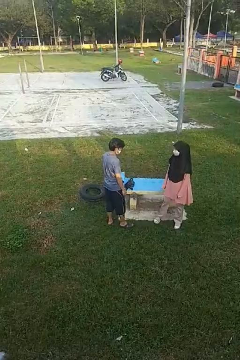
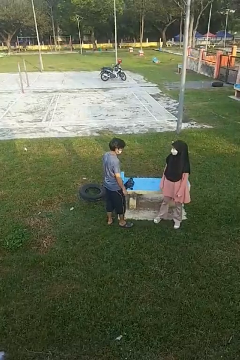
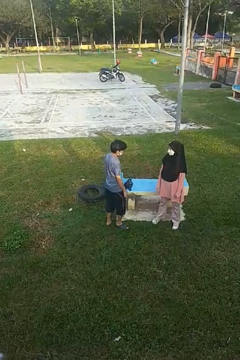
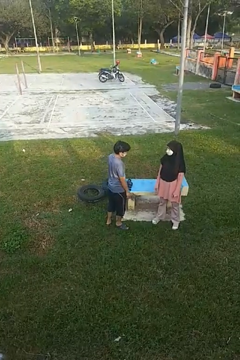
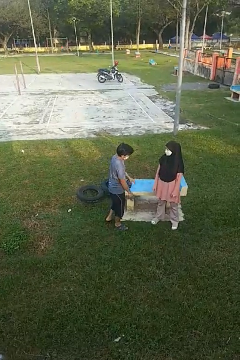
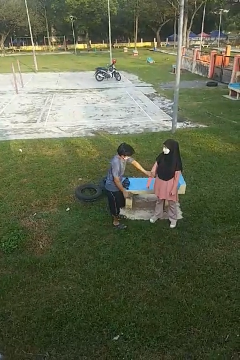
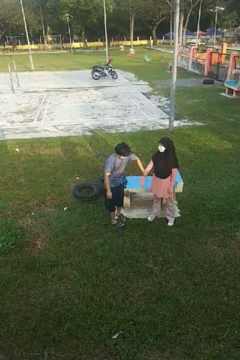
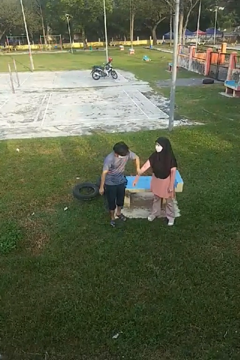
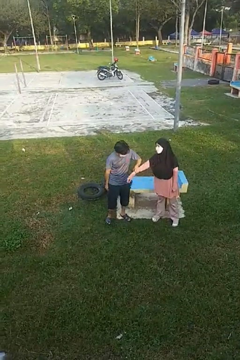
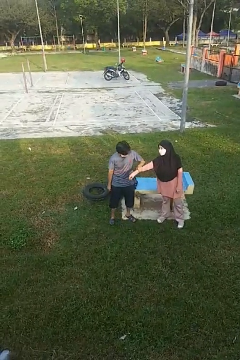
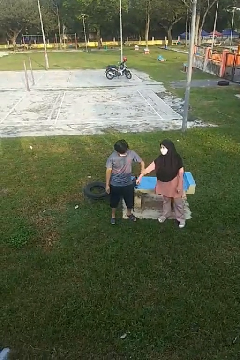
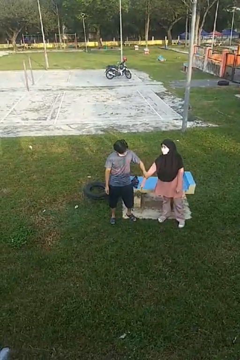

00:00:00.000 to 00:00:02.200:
person grabs person by forearm

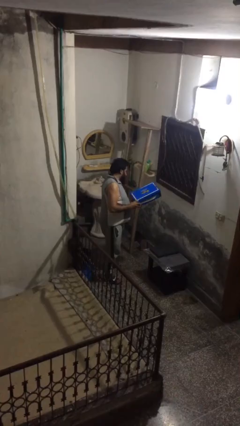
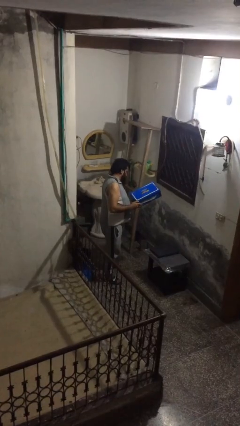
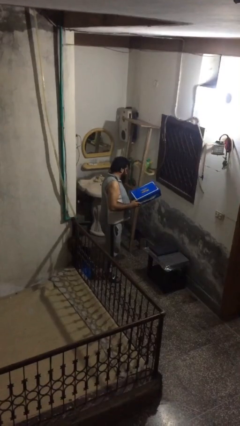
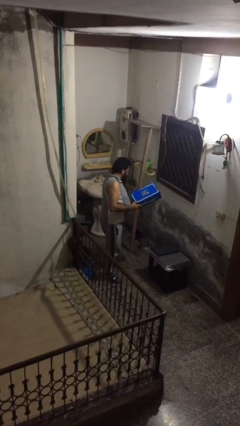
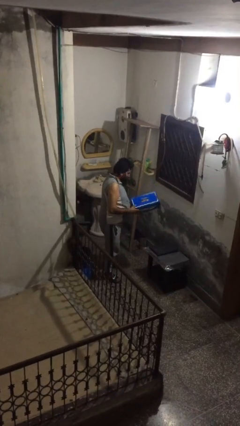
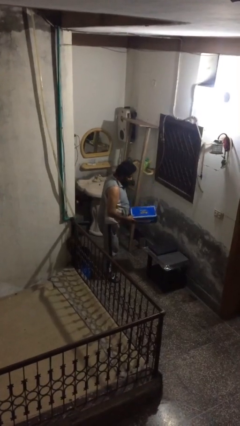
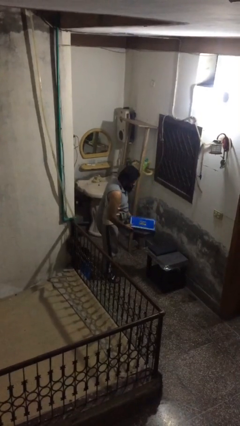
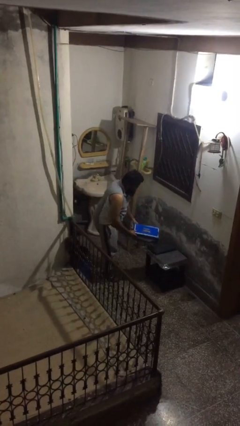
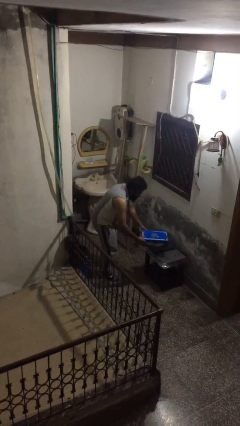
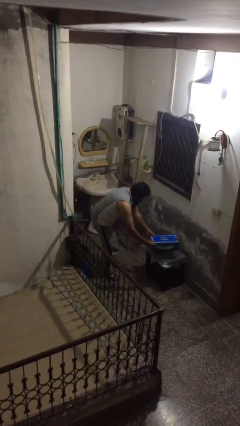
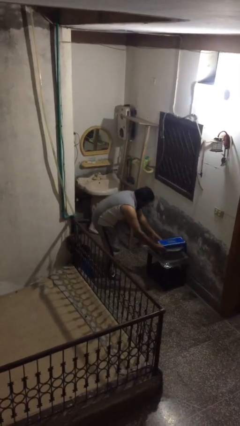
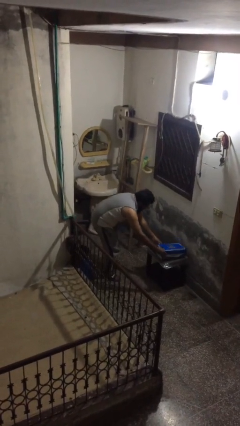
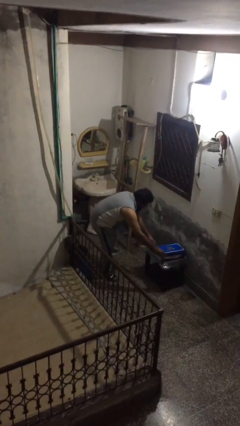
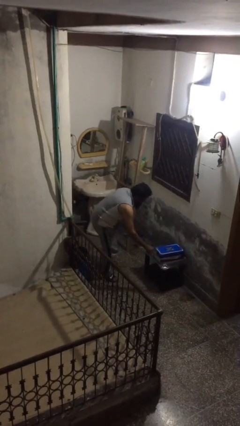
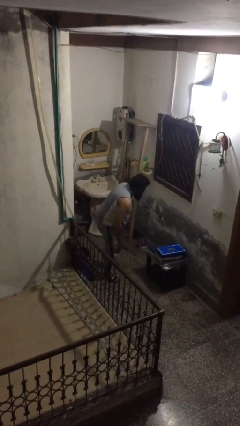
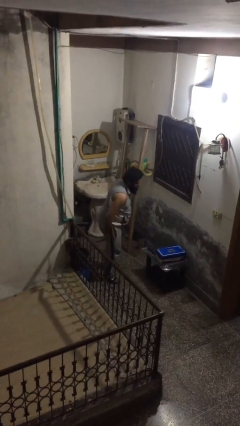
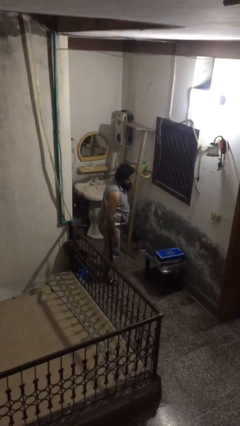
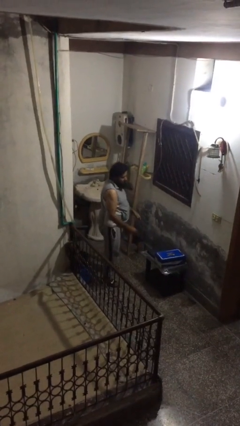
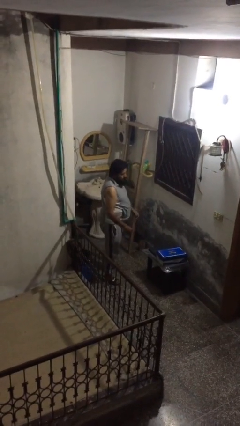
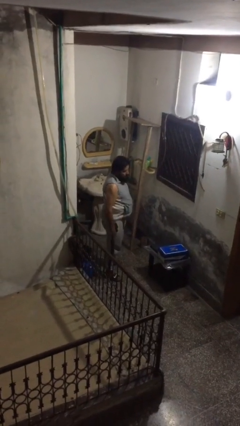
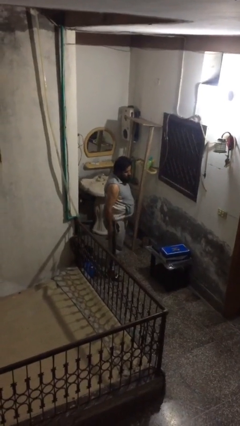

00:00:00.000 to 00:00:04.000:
person puts down object on table

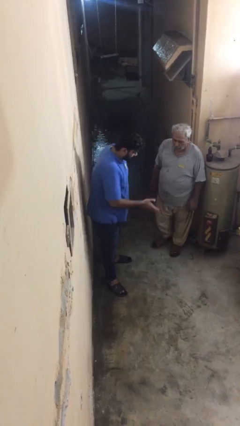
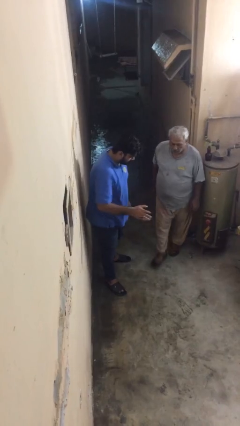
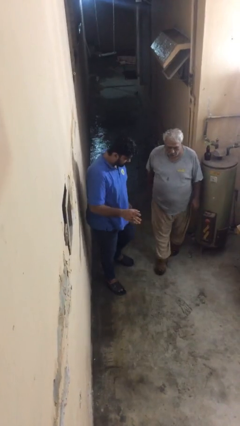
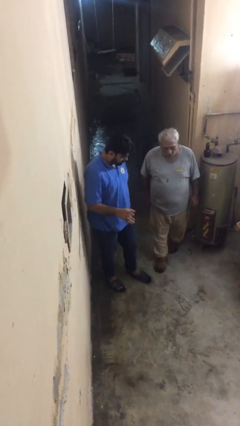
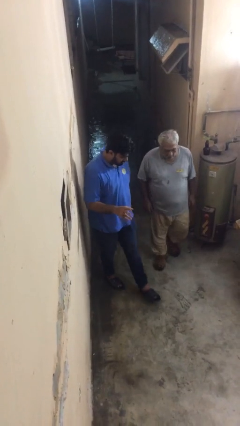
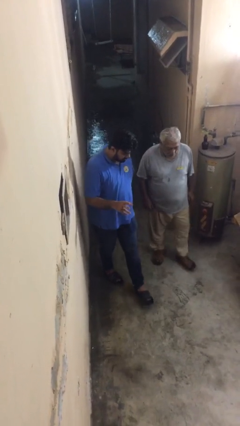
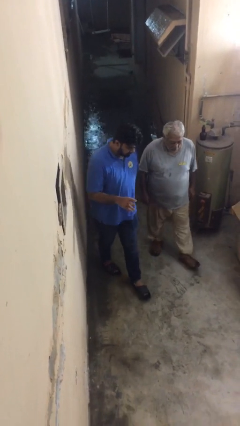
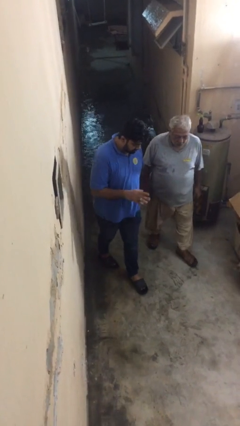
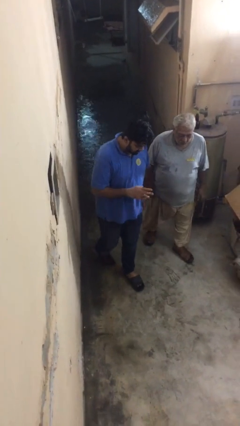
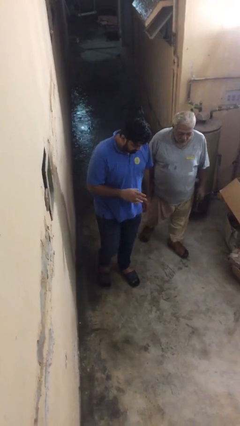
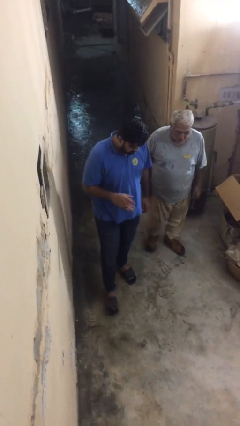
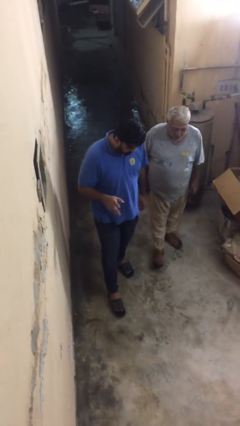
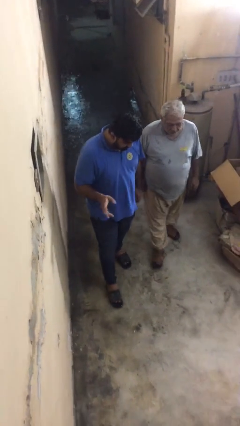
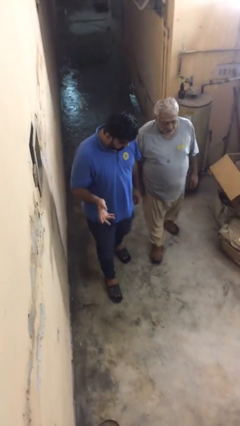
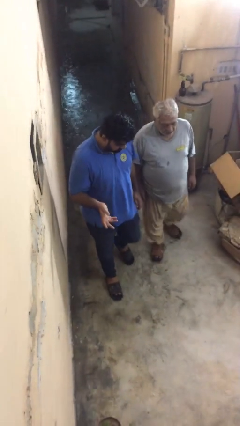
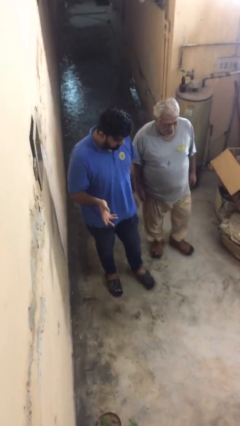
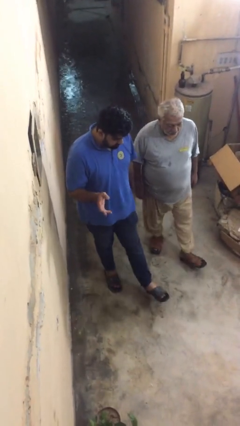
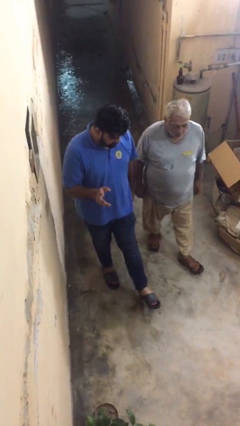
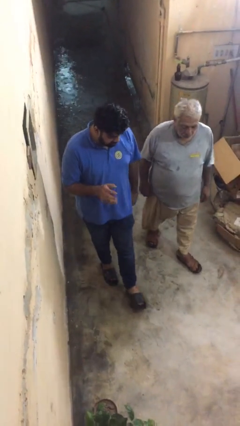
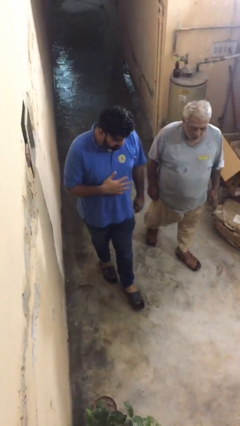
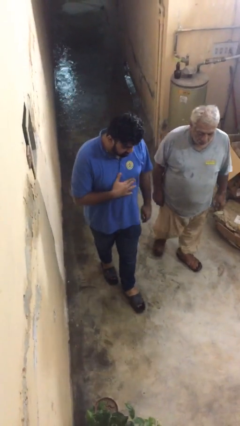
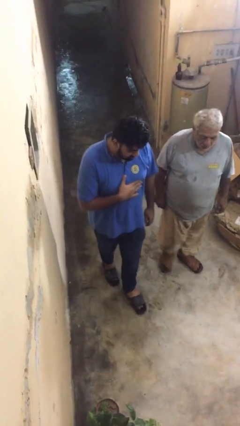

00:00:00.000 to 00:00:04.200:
person talks to person

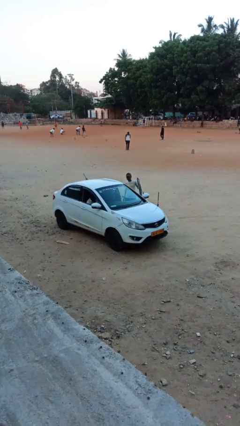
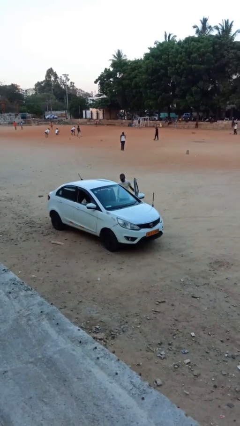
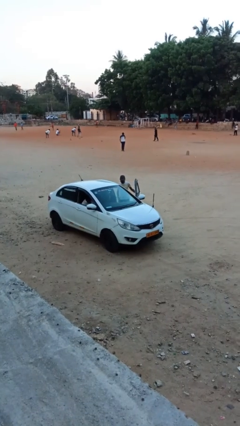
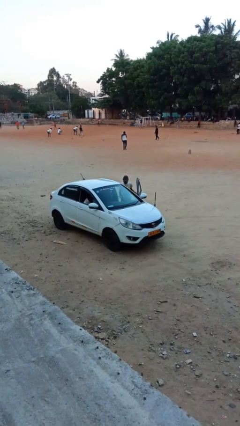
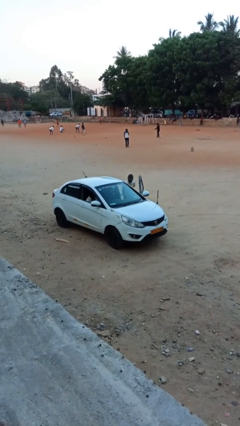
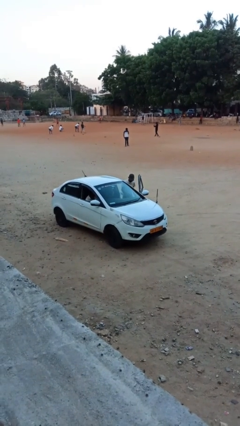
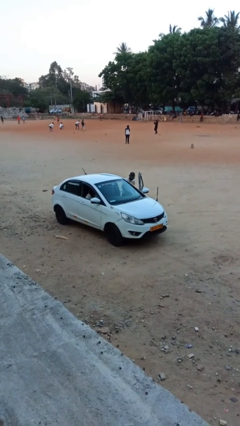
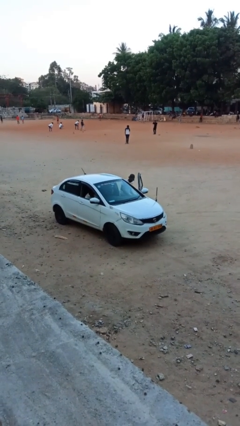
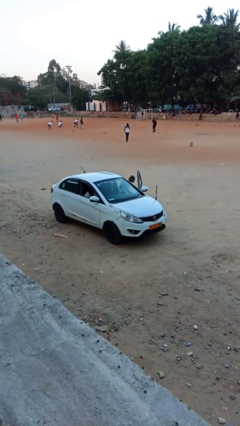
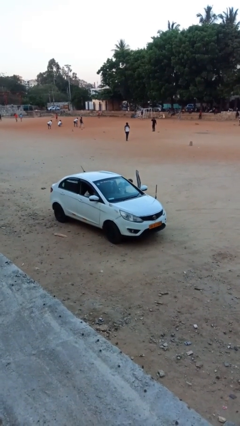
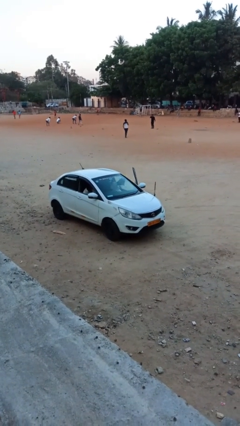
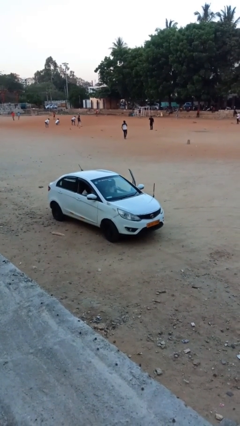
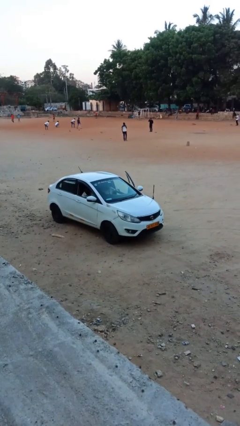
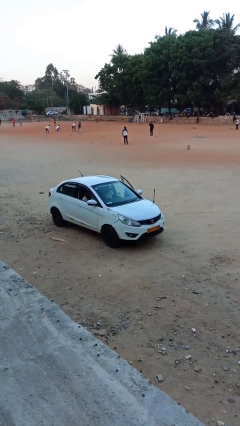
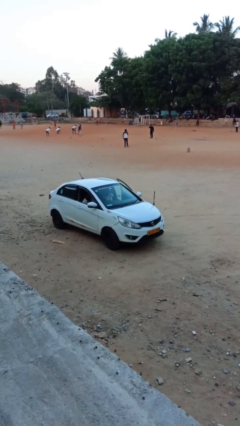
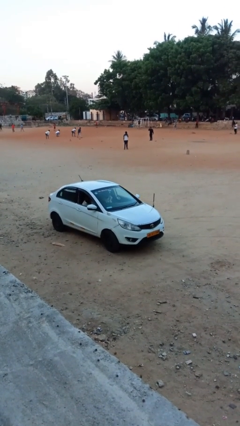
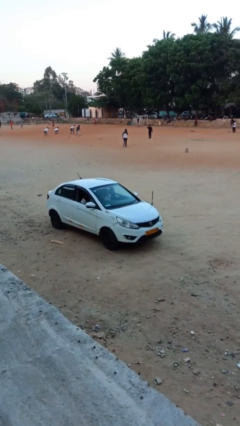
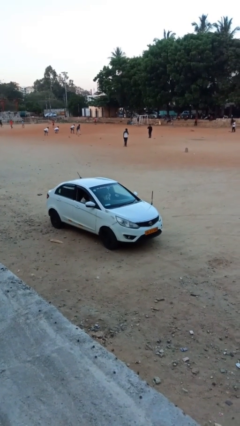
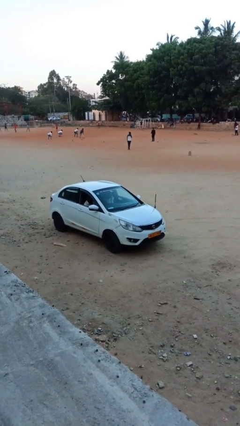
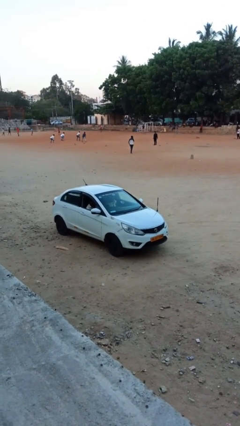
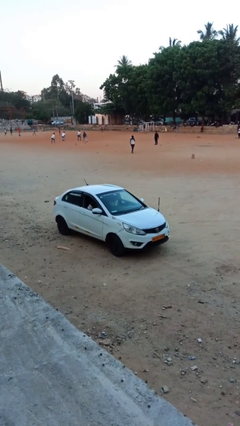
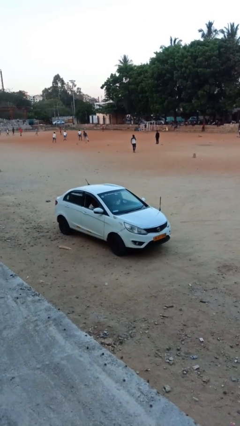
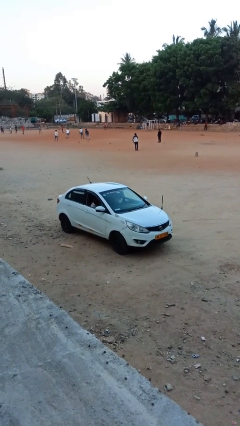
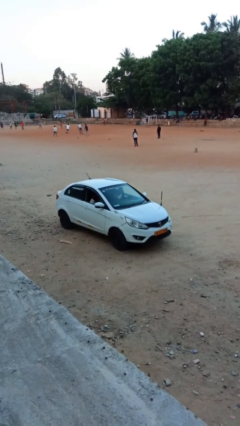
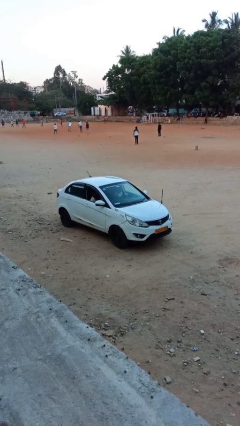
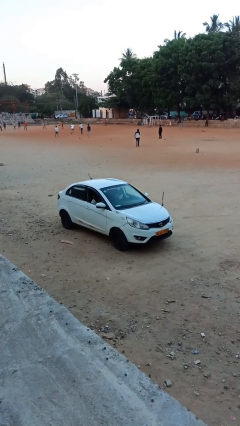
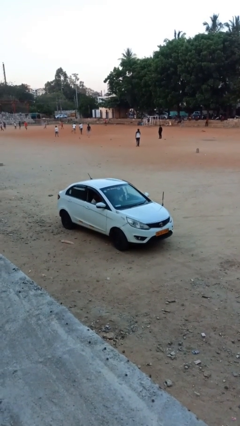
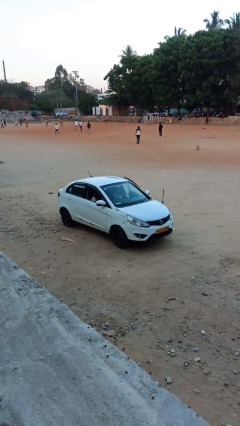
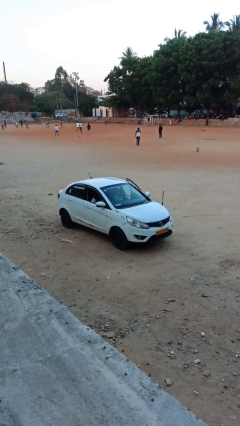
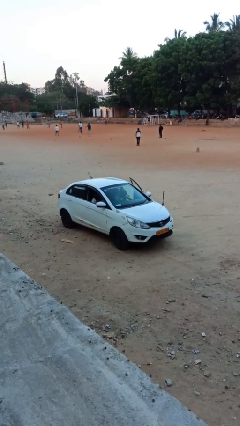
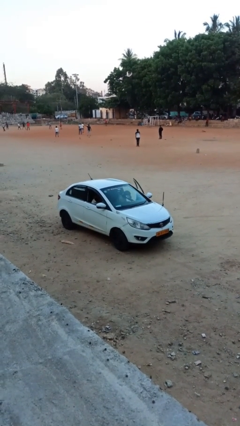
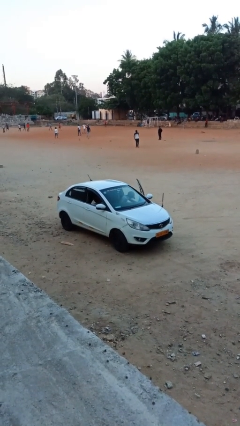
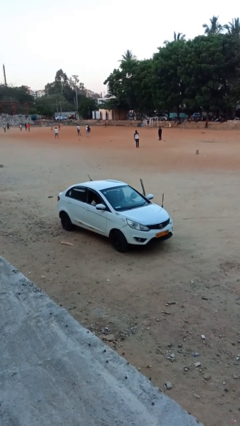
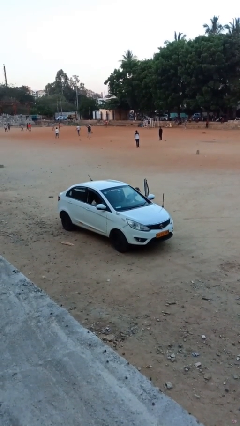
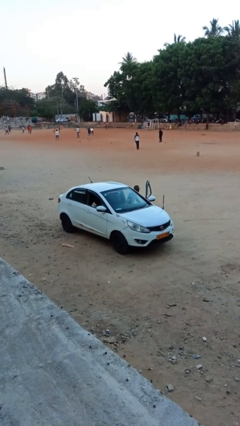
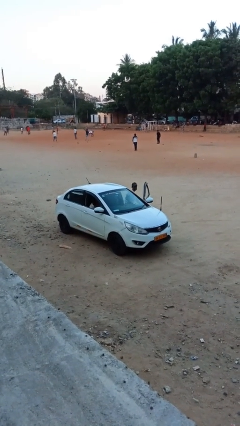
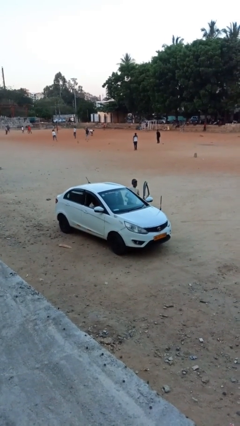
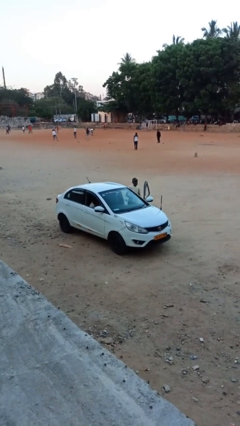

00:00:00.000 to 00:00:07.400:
car picks up person

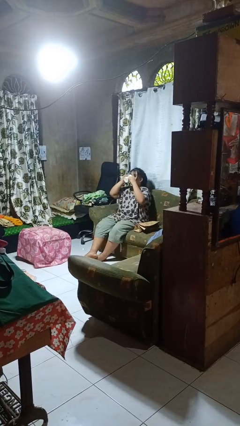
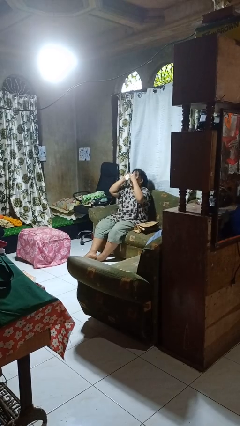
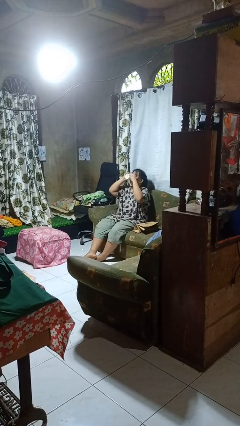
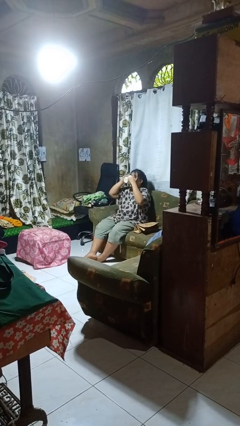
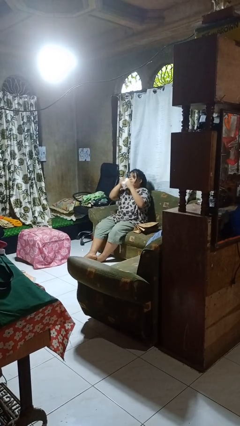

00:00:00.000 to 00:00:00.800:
person drinks from mug
